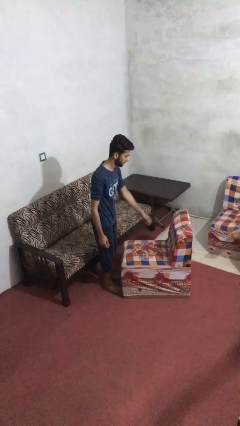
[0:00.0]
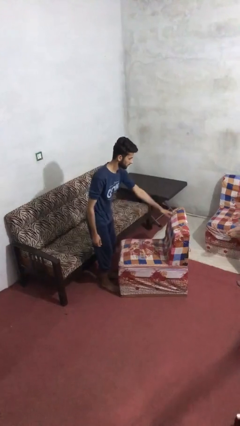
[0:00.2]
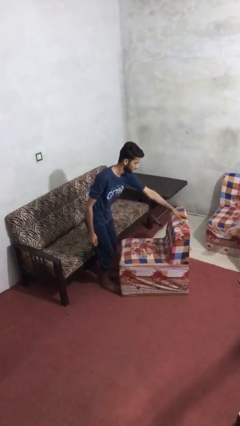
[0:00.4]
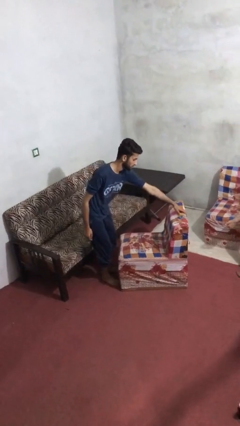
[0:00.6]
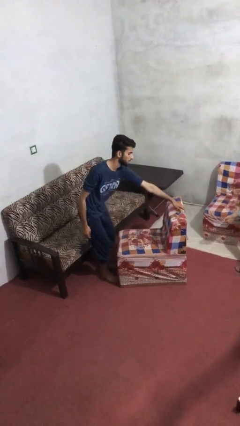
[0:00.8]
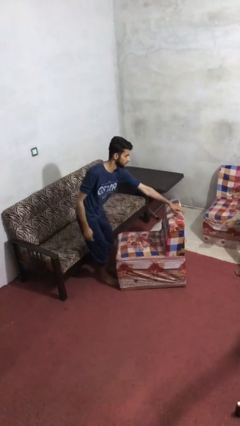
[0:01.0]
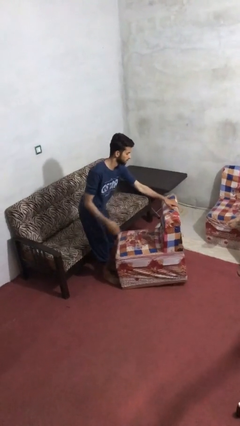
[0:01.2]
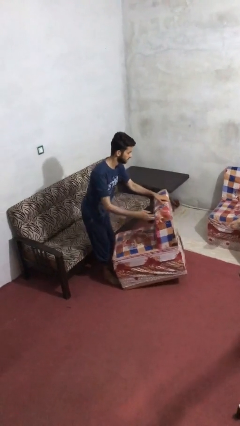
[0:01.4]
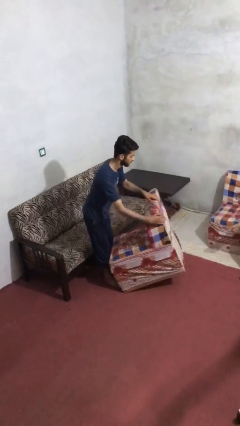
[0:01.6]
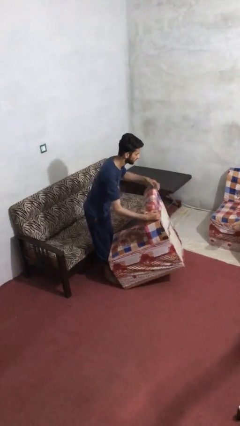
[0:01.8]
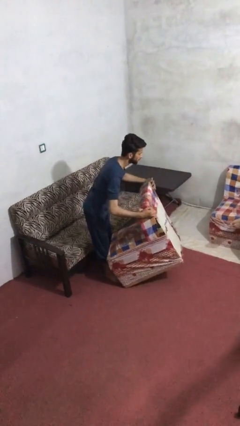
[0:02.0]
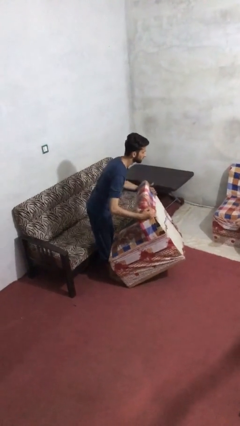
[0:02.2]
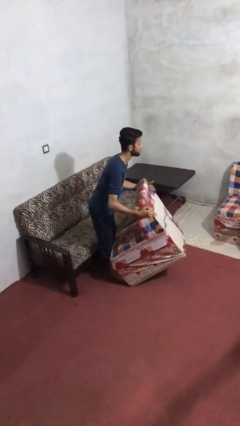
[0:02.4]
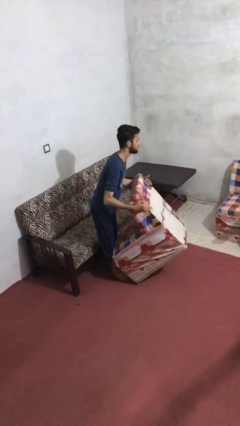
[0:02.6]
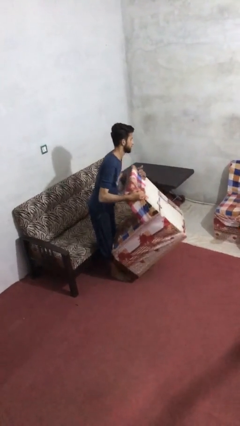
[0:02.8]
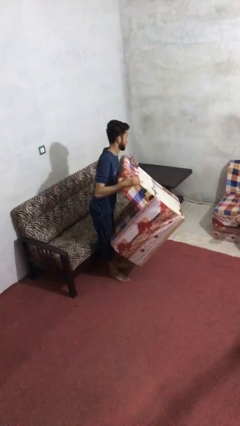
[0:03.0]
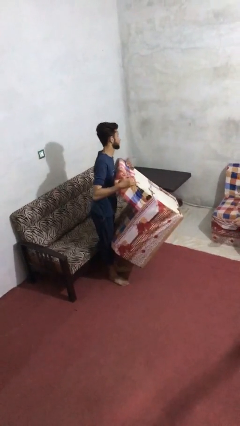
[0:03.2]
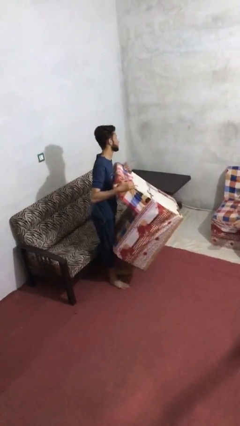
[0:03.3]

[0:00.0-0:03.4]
person picks up object from floor

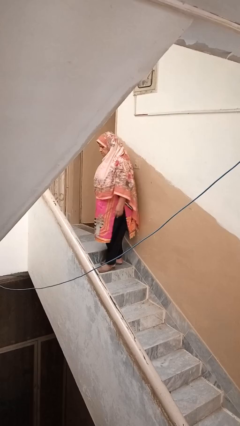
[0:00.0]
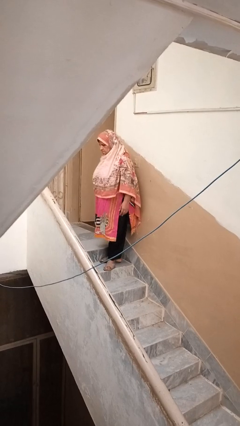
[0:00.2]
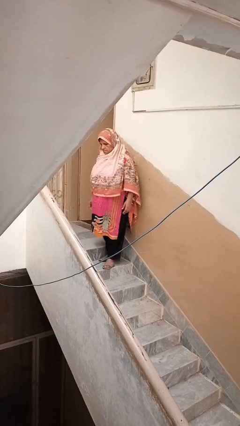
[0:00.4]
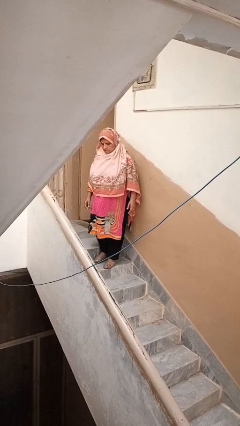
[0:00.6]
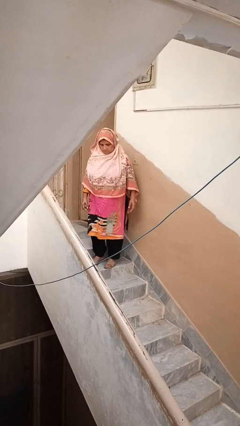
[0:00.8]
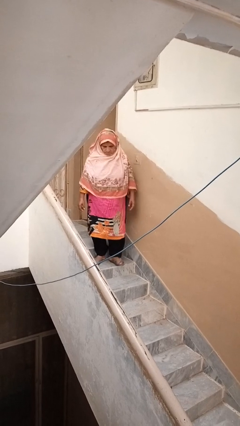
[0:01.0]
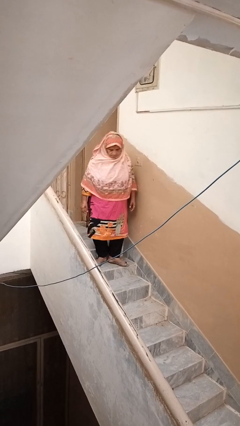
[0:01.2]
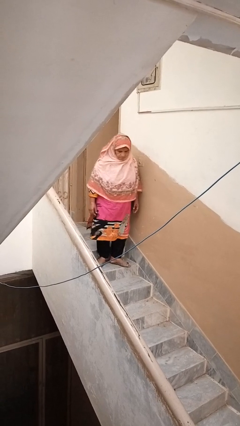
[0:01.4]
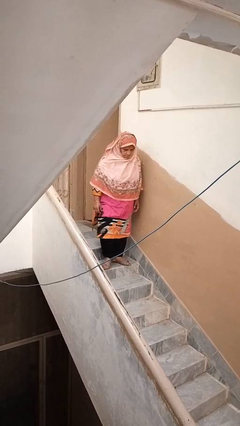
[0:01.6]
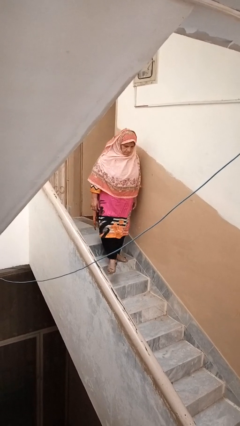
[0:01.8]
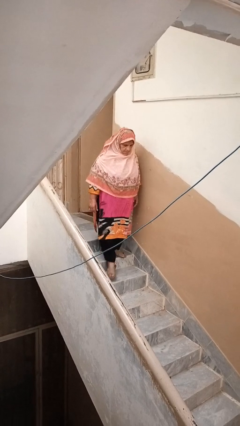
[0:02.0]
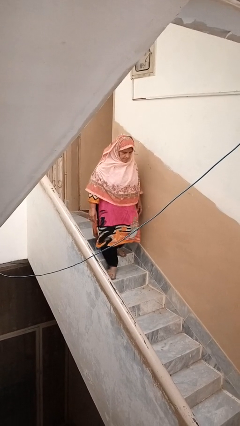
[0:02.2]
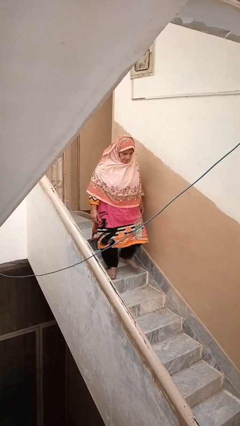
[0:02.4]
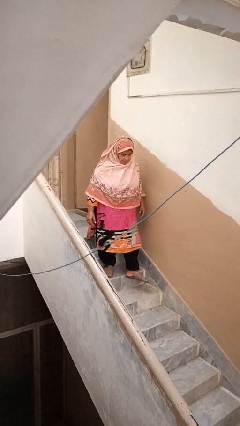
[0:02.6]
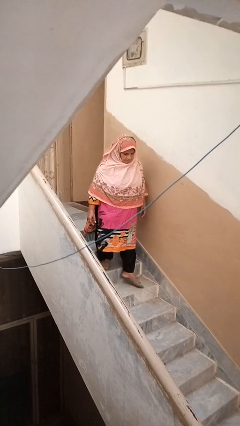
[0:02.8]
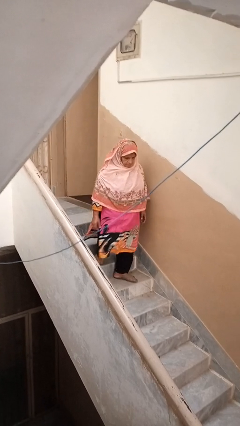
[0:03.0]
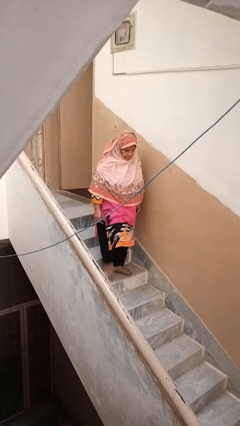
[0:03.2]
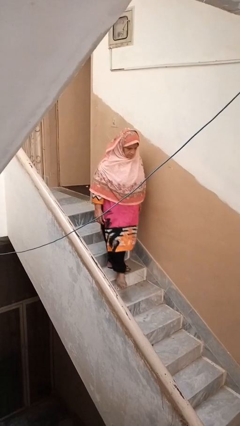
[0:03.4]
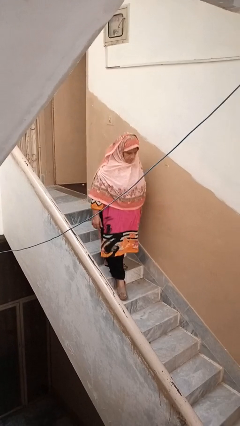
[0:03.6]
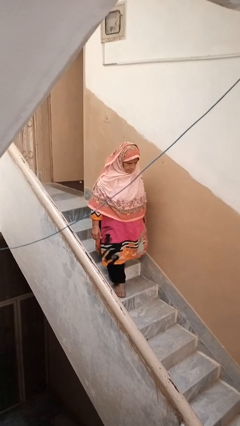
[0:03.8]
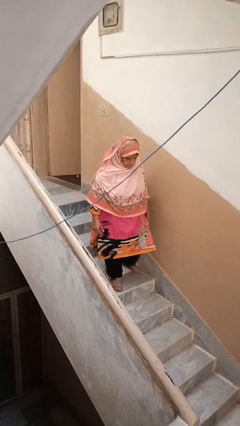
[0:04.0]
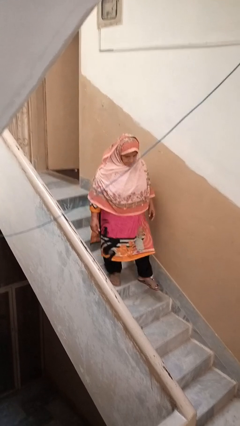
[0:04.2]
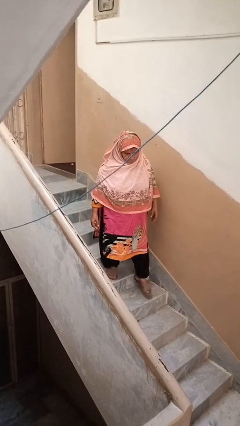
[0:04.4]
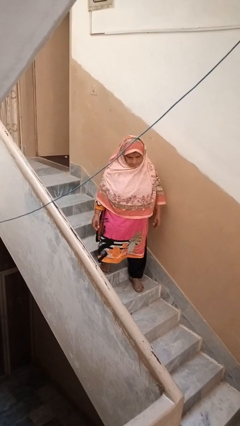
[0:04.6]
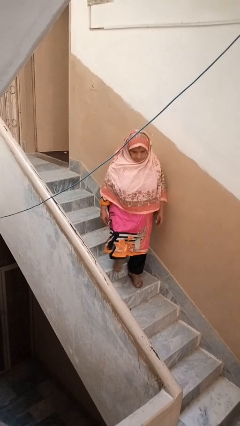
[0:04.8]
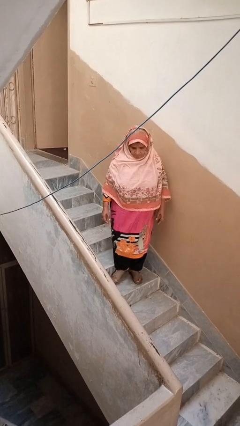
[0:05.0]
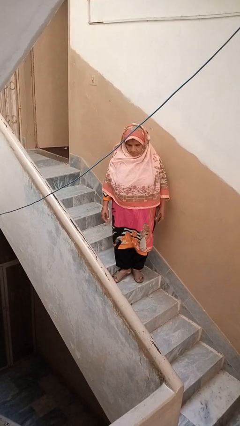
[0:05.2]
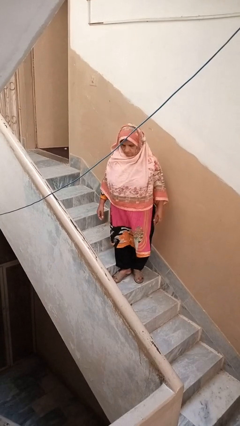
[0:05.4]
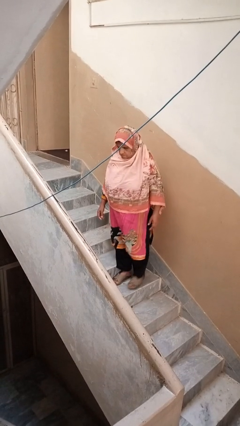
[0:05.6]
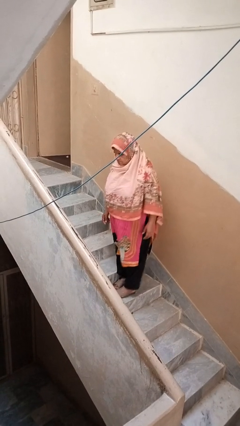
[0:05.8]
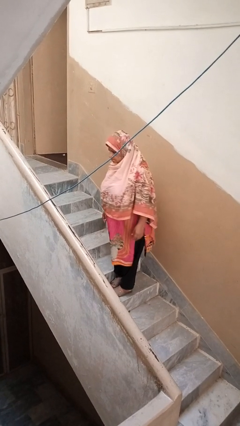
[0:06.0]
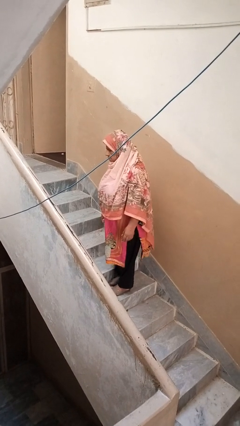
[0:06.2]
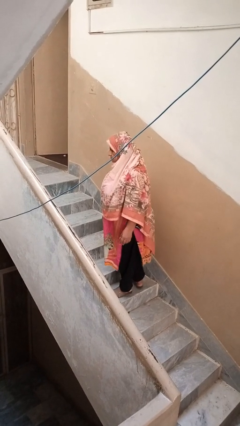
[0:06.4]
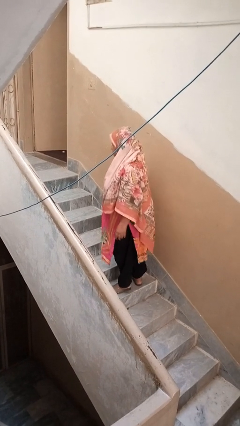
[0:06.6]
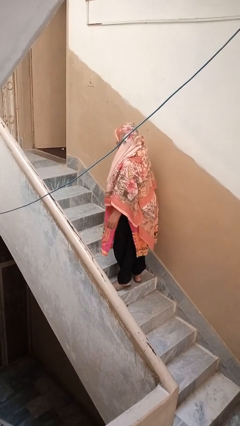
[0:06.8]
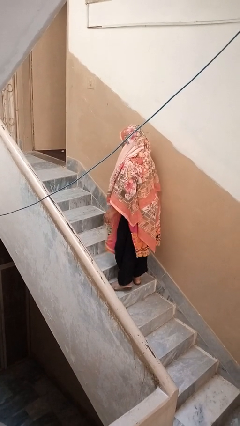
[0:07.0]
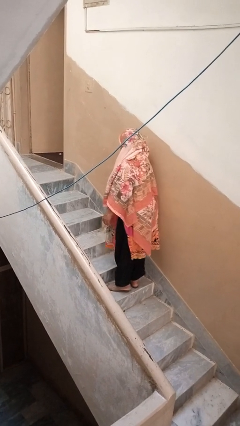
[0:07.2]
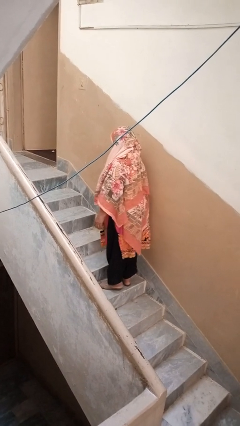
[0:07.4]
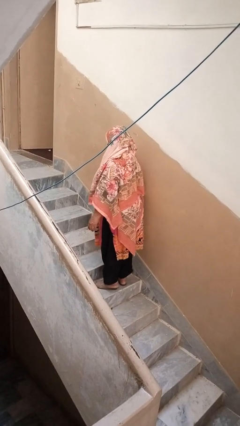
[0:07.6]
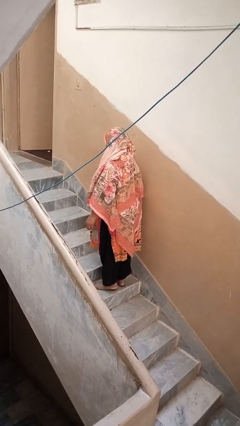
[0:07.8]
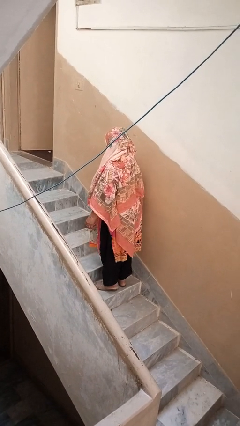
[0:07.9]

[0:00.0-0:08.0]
person climbs down stairs

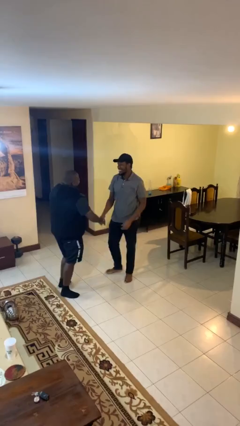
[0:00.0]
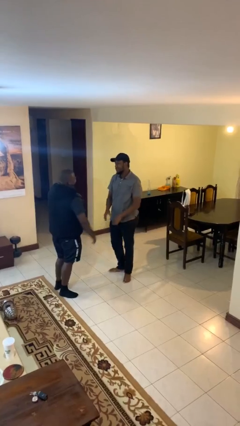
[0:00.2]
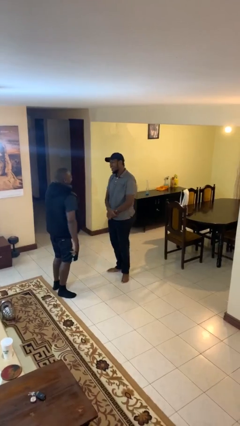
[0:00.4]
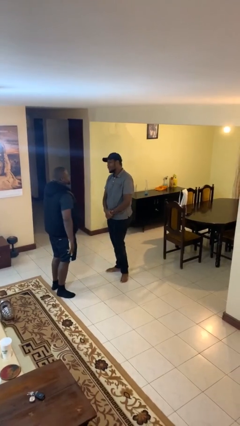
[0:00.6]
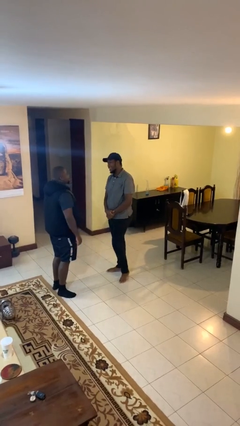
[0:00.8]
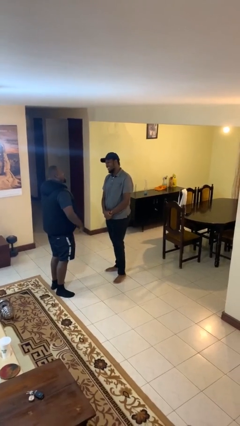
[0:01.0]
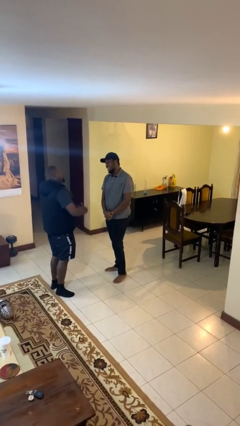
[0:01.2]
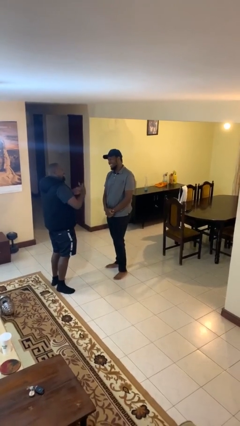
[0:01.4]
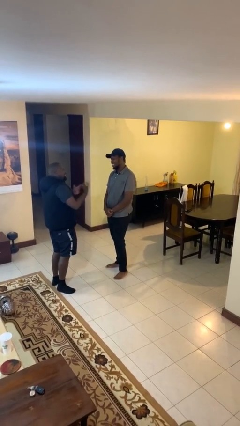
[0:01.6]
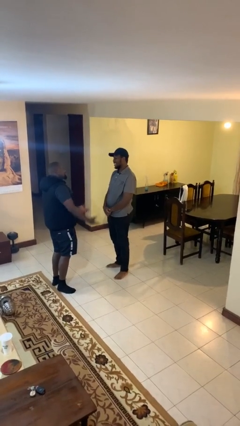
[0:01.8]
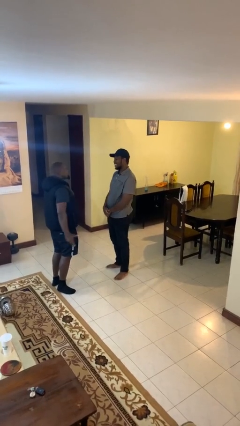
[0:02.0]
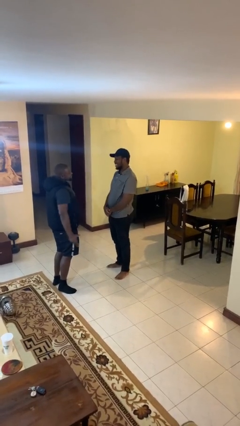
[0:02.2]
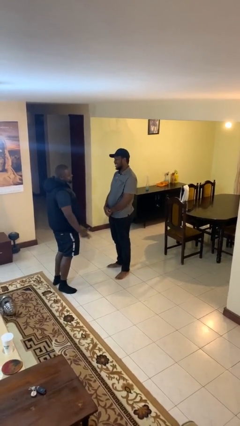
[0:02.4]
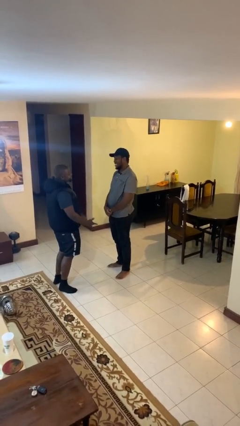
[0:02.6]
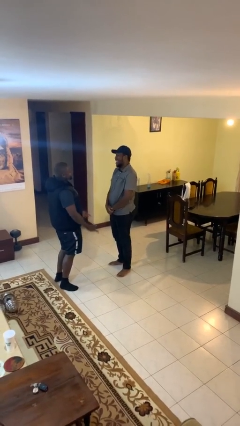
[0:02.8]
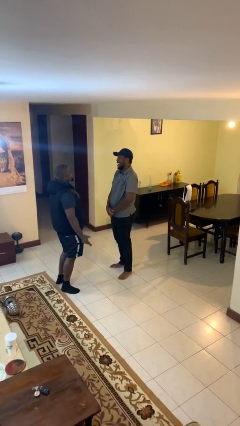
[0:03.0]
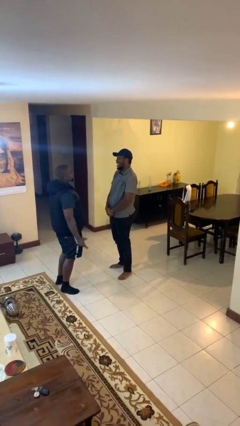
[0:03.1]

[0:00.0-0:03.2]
person talks to person

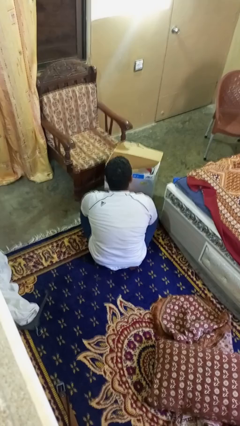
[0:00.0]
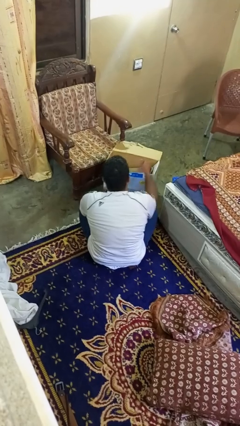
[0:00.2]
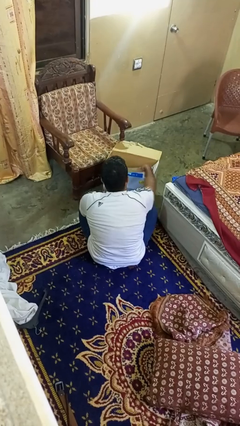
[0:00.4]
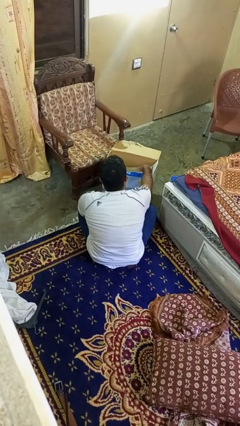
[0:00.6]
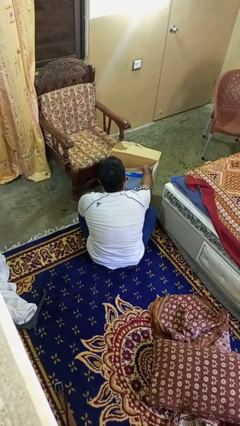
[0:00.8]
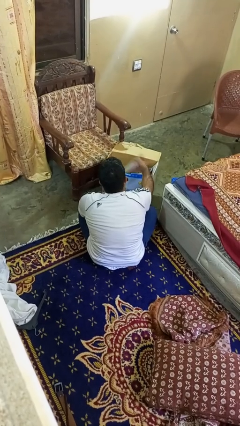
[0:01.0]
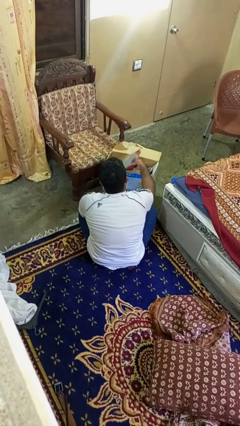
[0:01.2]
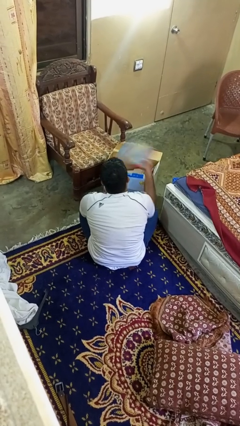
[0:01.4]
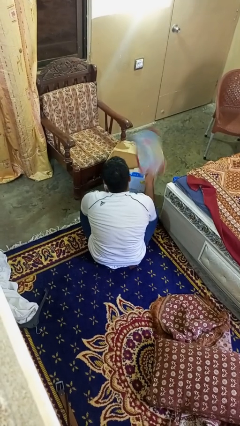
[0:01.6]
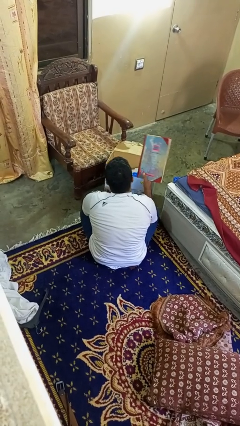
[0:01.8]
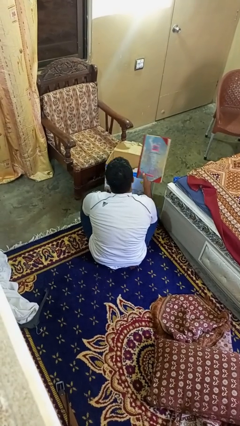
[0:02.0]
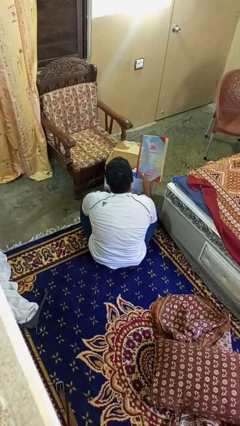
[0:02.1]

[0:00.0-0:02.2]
person takes object from box

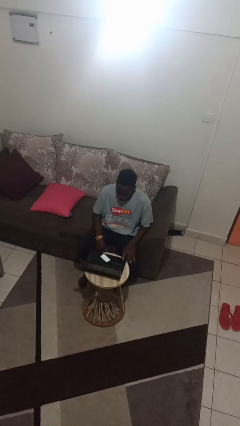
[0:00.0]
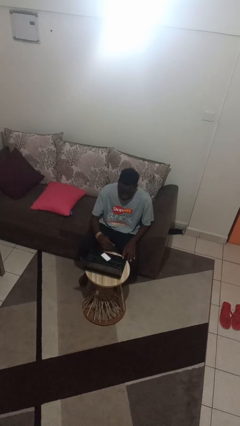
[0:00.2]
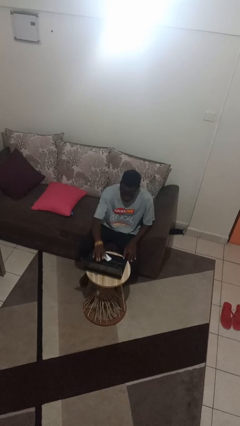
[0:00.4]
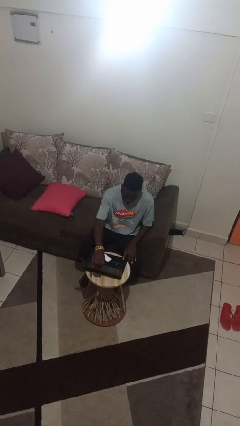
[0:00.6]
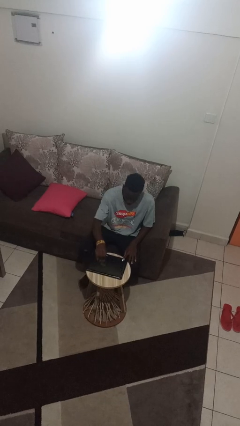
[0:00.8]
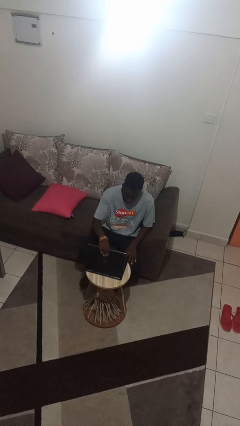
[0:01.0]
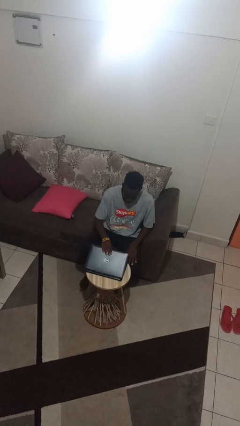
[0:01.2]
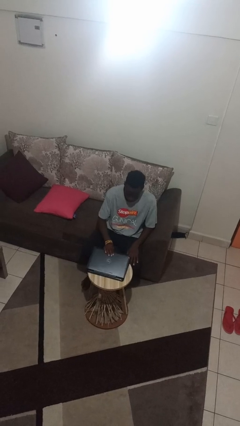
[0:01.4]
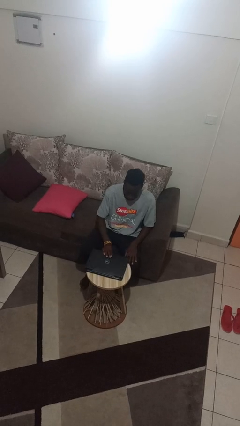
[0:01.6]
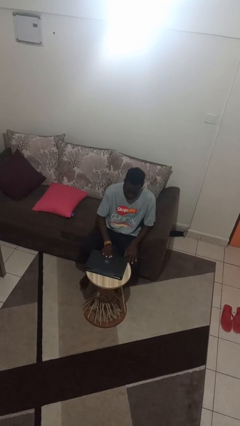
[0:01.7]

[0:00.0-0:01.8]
person closes laptop
